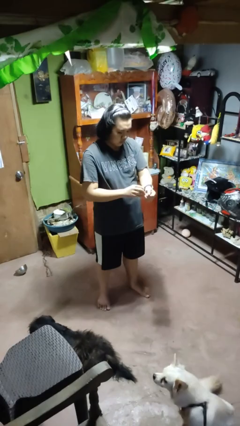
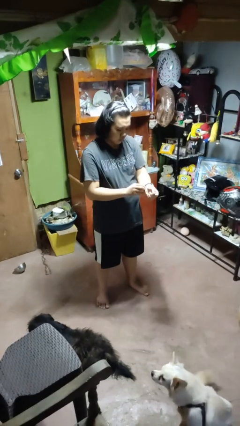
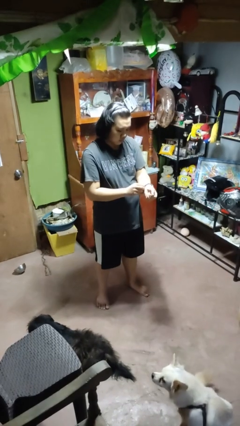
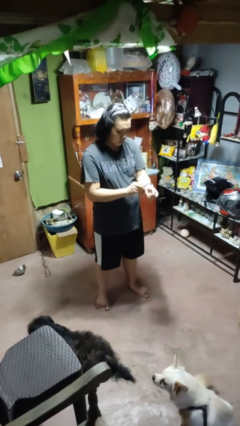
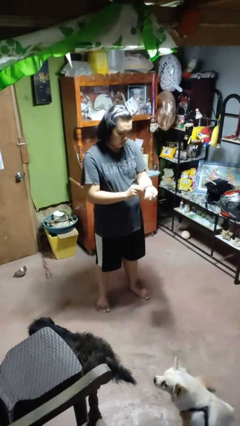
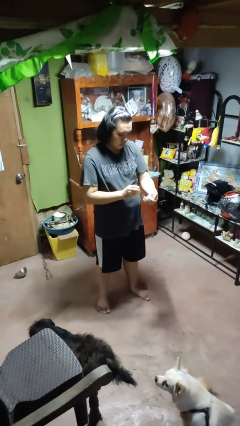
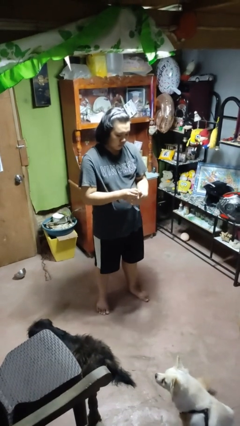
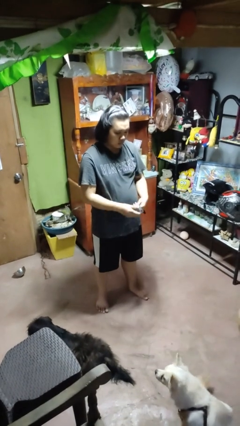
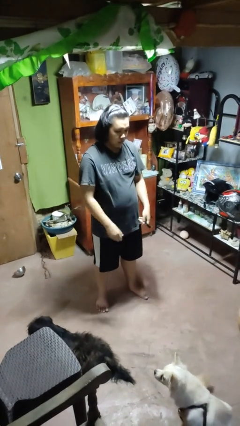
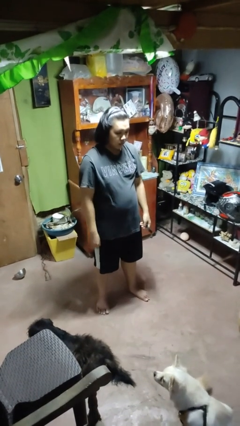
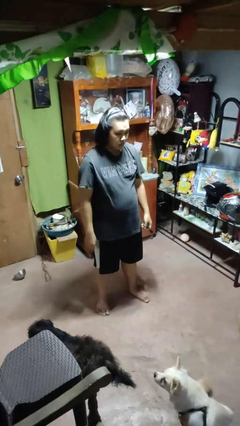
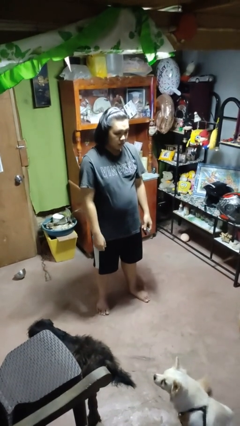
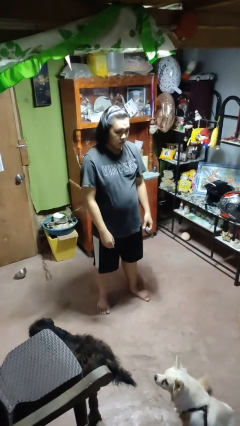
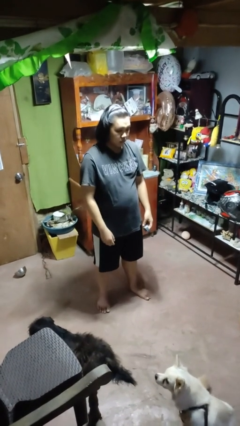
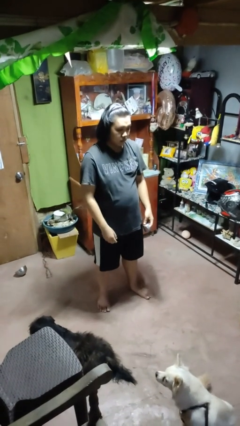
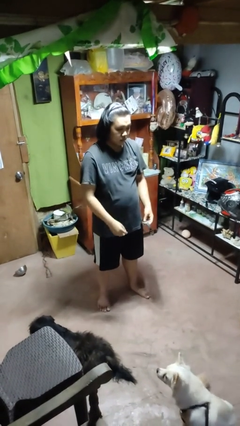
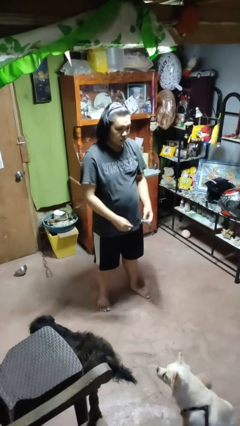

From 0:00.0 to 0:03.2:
person takes off wristwatch

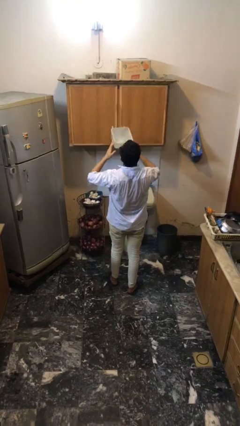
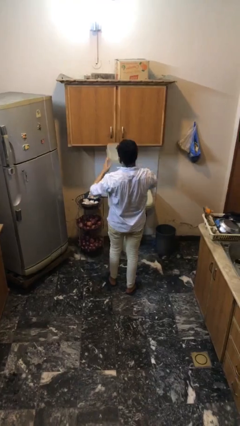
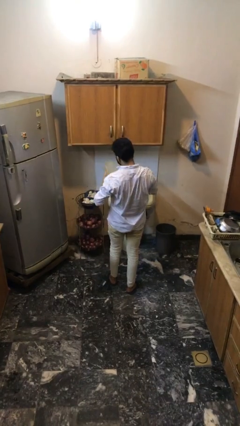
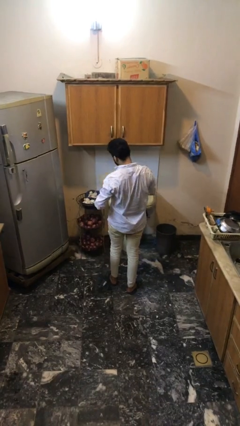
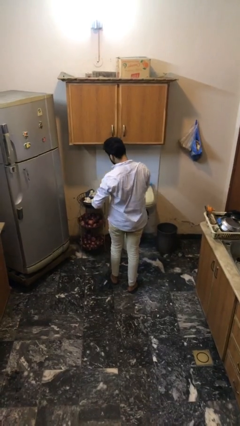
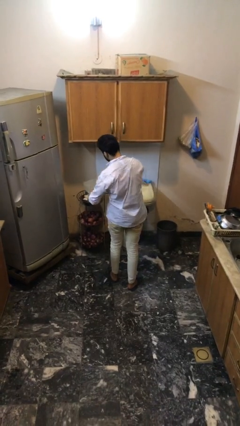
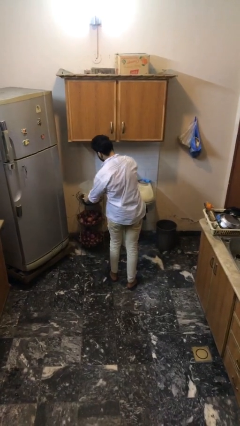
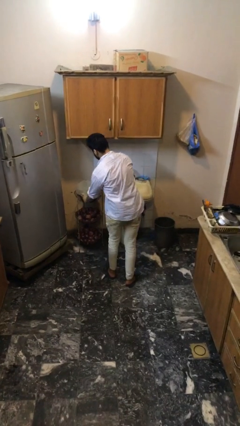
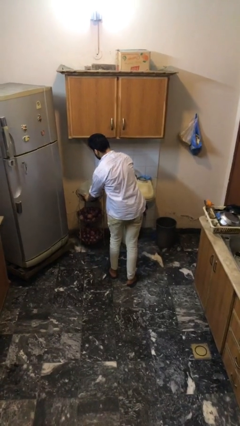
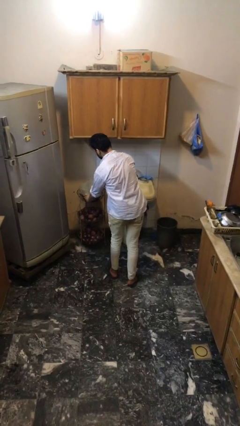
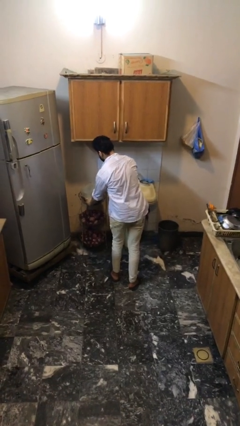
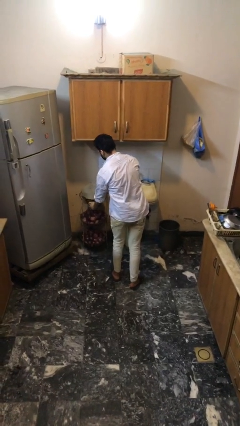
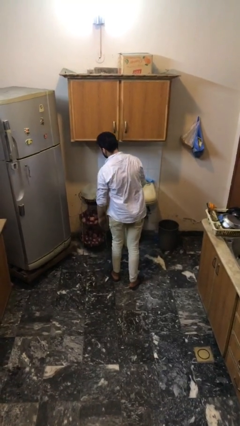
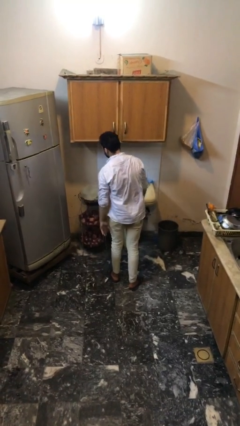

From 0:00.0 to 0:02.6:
person puts down object on table

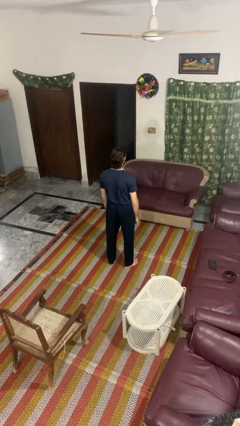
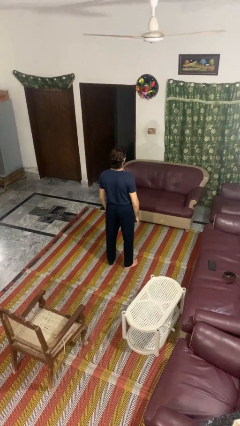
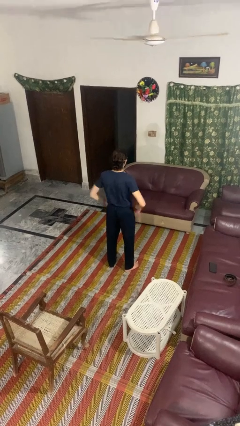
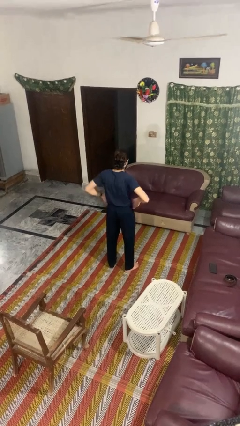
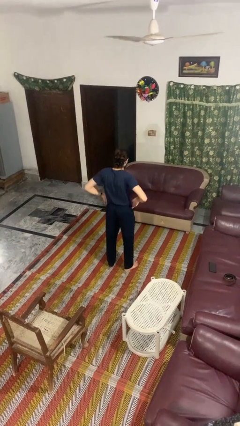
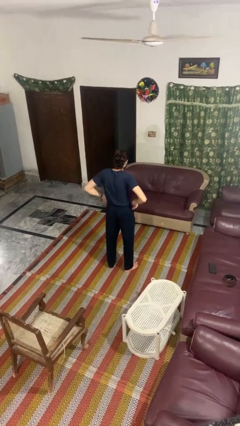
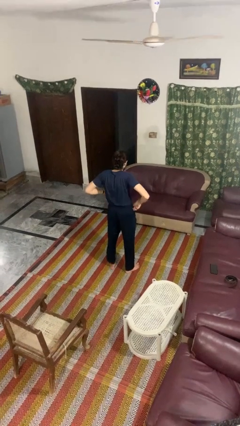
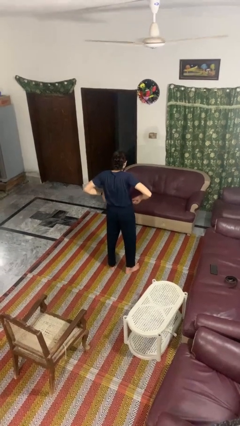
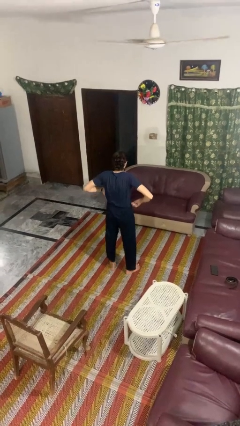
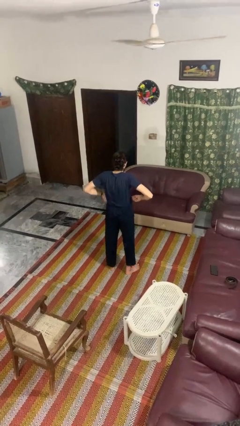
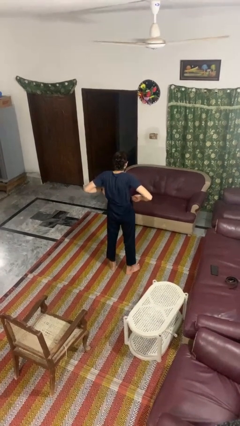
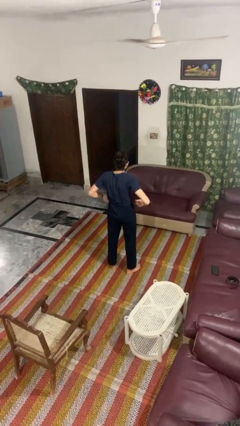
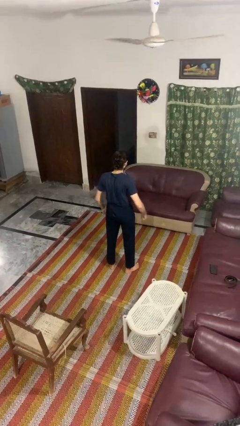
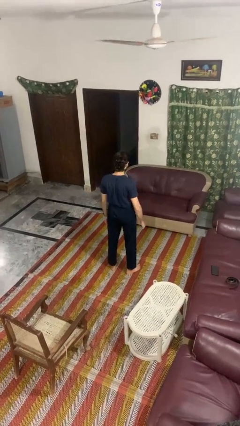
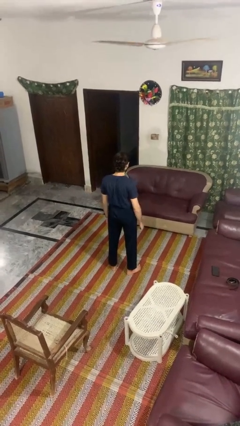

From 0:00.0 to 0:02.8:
person hikes up pants

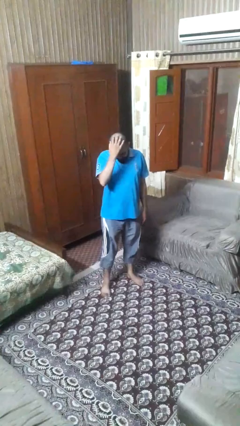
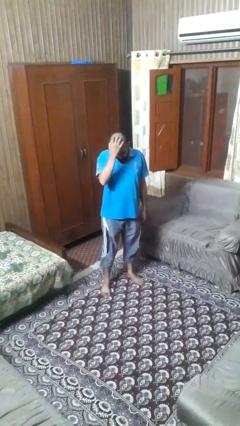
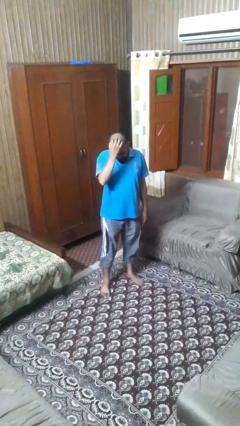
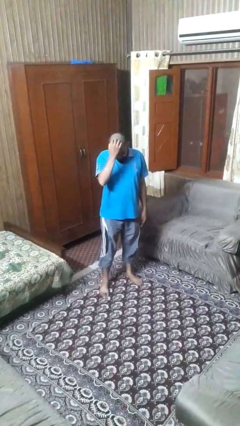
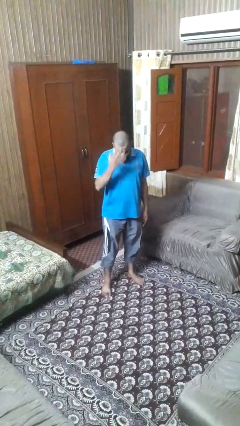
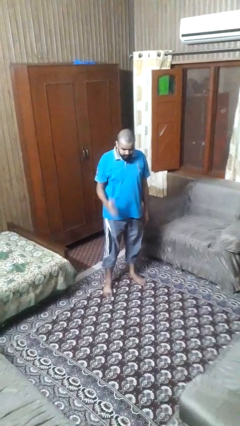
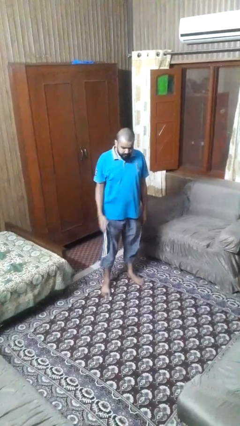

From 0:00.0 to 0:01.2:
person scratches face

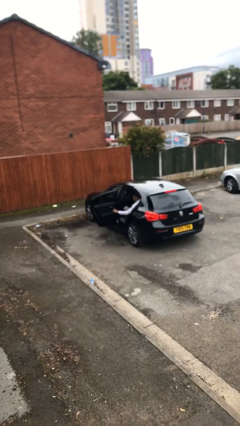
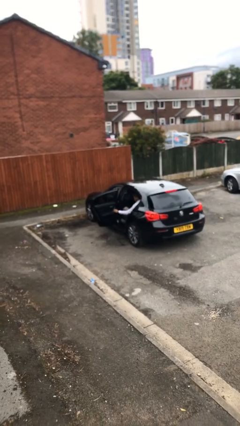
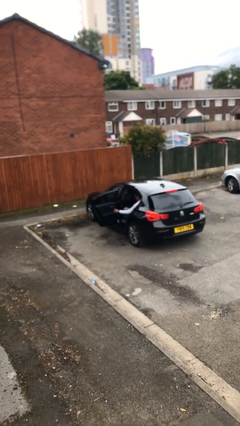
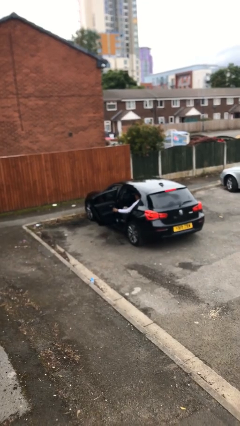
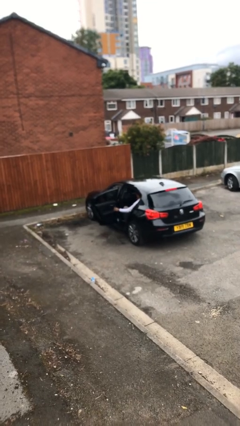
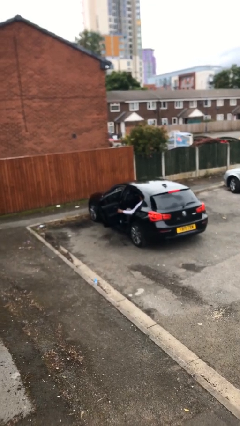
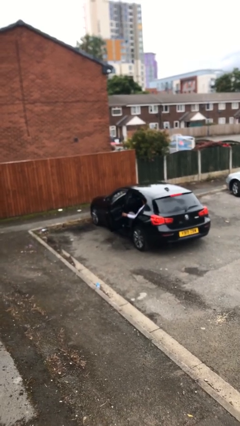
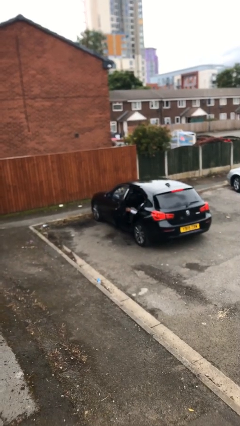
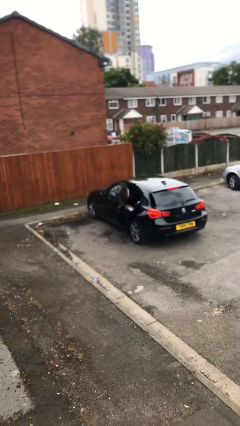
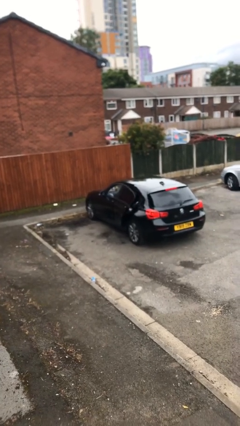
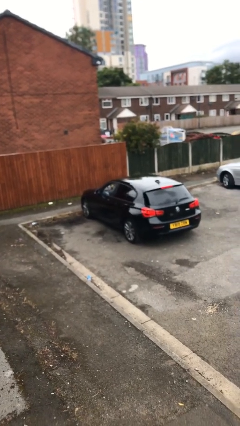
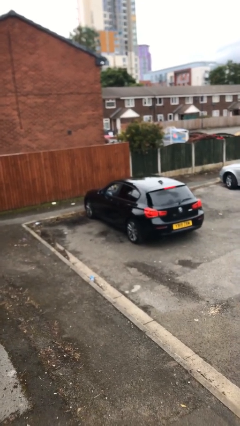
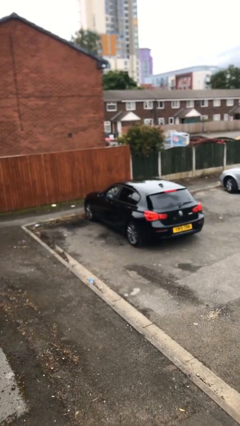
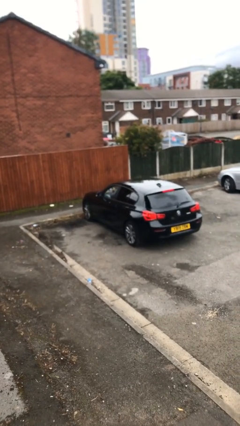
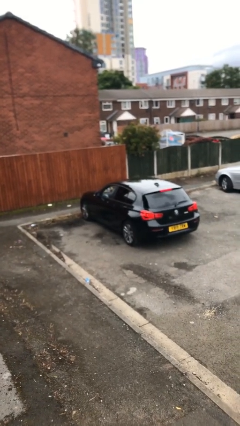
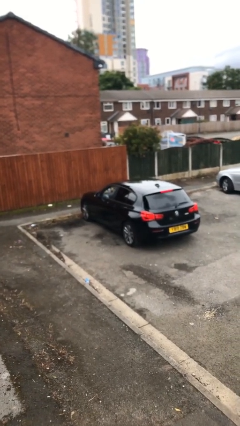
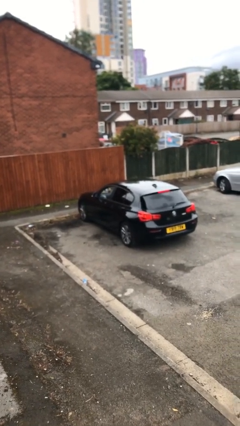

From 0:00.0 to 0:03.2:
person closes car door

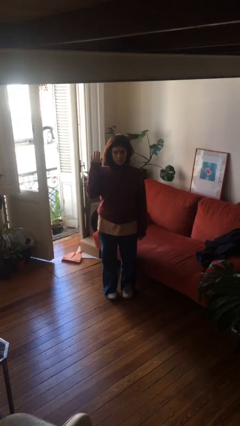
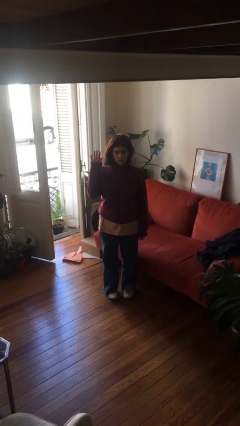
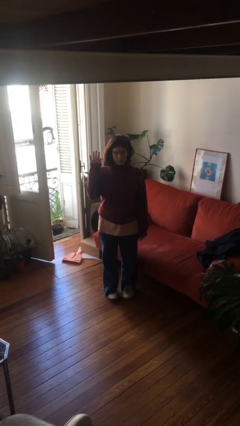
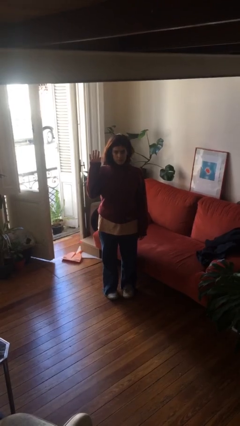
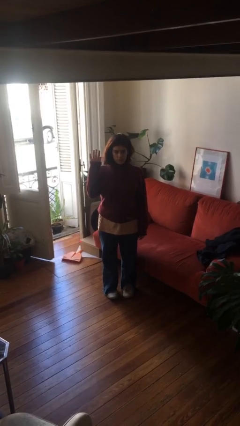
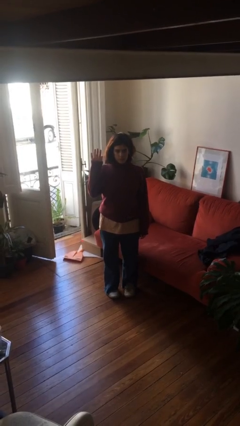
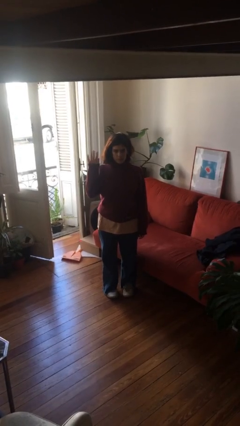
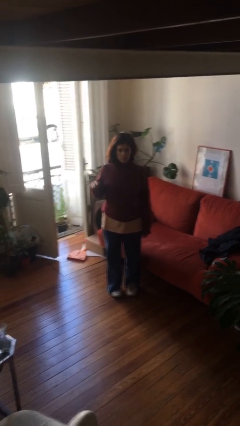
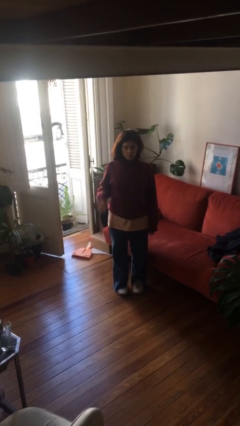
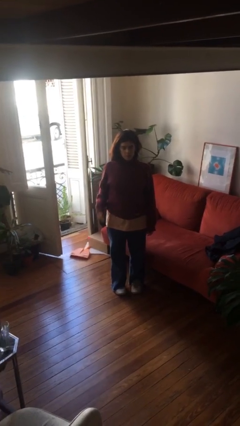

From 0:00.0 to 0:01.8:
person gestures raise hand

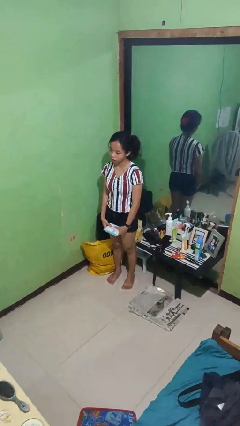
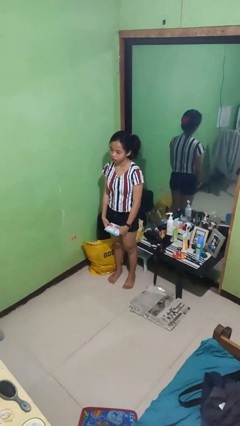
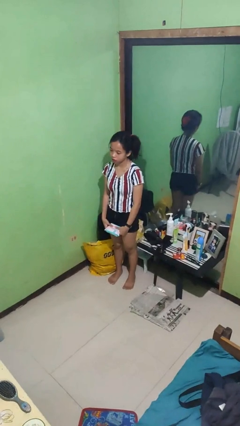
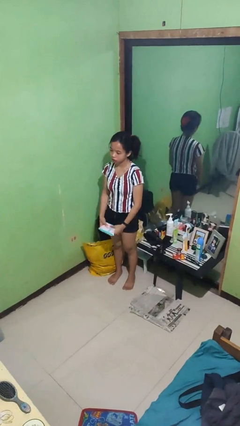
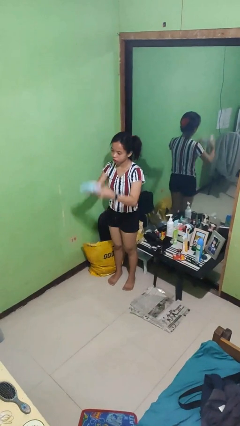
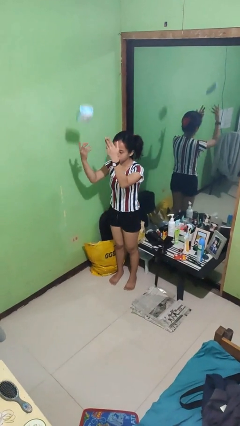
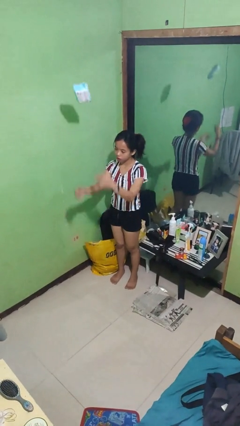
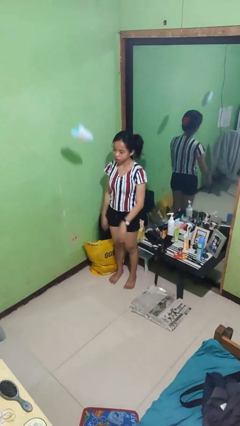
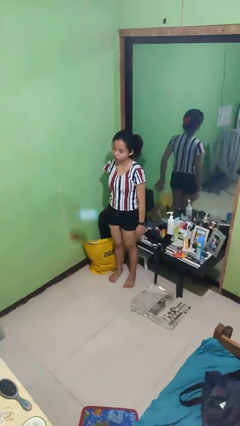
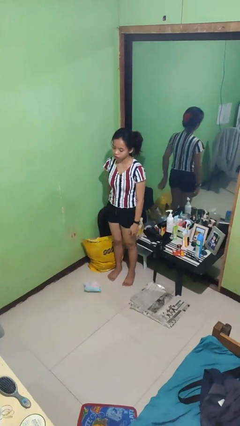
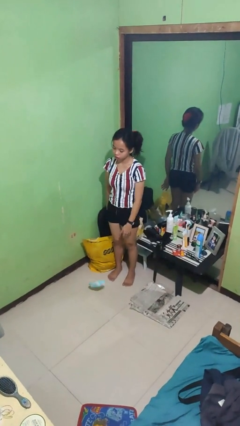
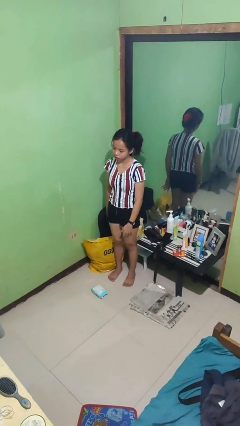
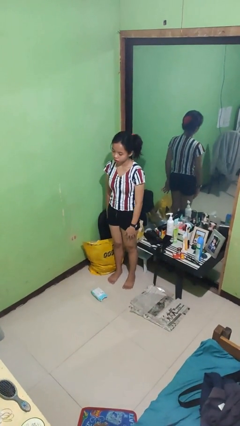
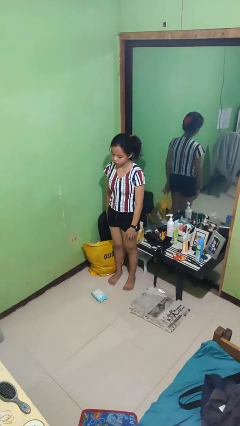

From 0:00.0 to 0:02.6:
person throws object into air
